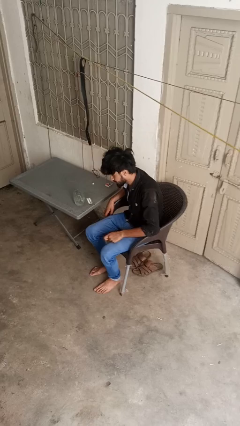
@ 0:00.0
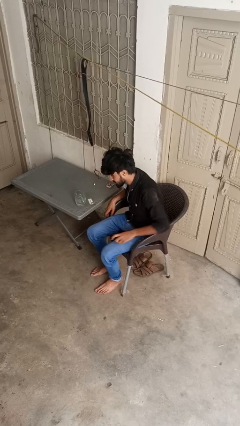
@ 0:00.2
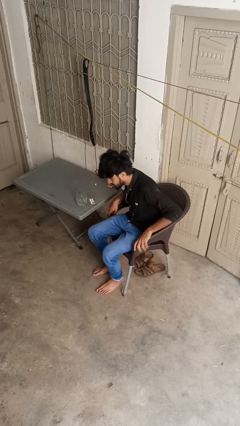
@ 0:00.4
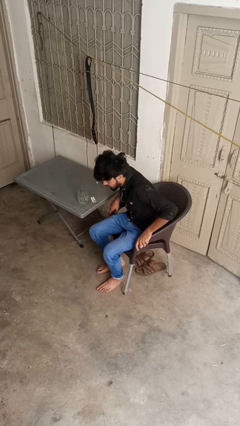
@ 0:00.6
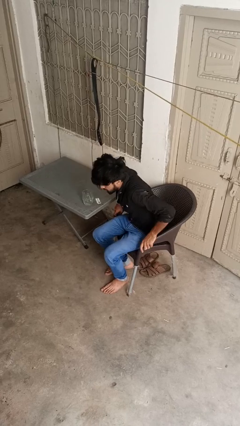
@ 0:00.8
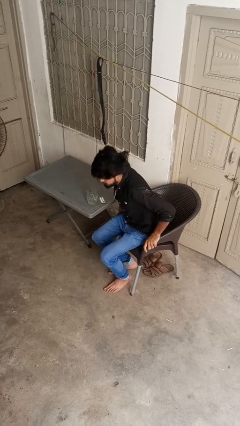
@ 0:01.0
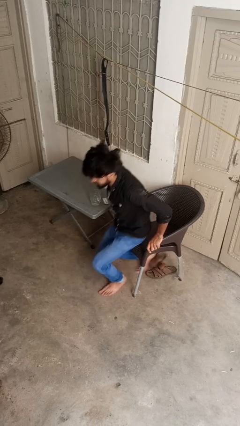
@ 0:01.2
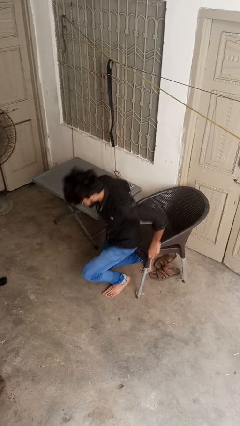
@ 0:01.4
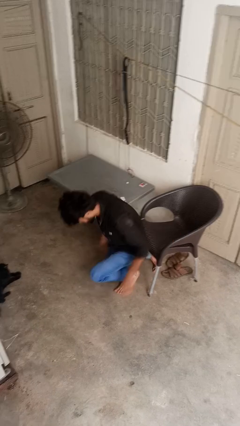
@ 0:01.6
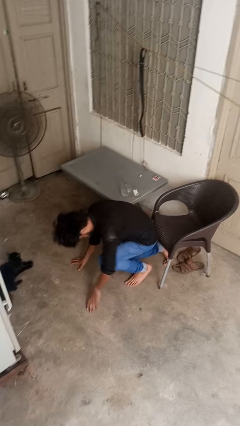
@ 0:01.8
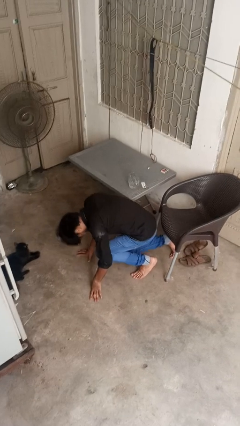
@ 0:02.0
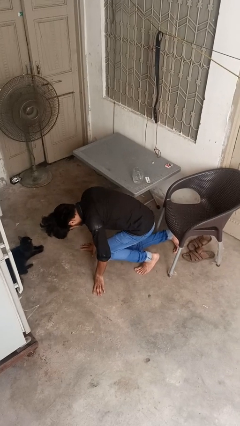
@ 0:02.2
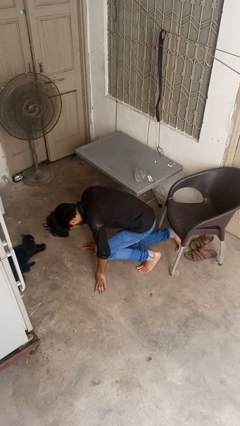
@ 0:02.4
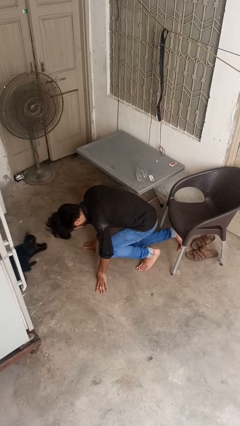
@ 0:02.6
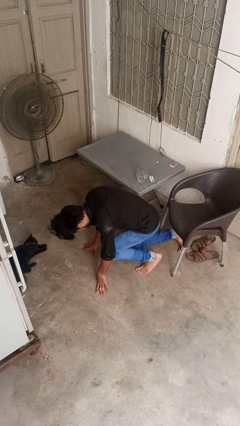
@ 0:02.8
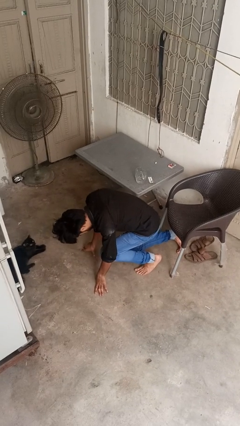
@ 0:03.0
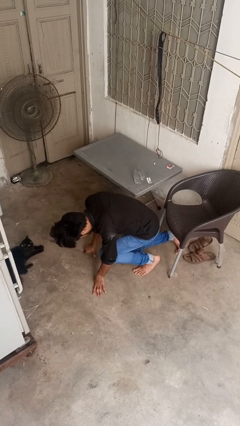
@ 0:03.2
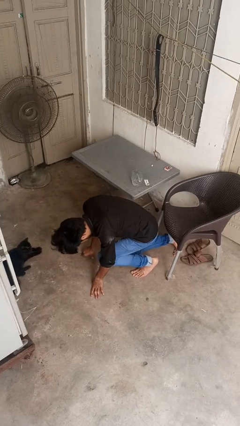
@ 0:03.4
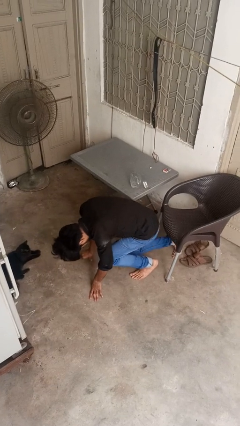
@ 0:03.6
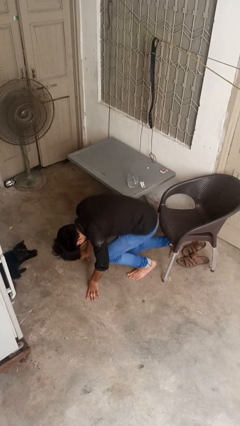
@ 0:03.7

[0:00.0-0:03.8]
person falls from chair

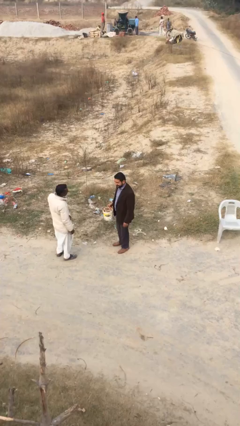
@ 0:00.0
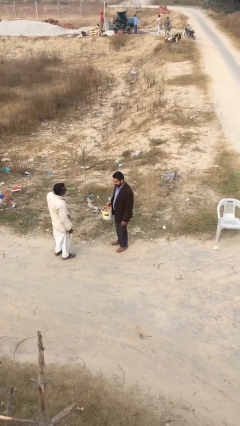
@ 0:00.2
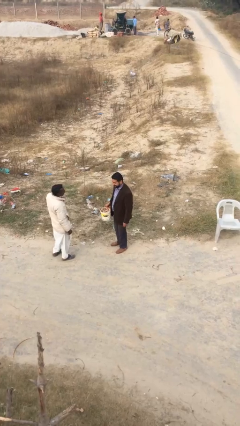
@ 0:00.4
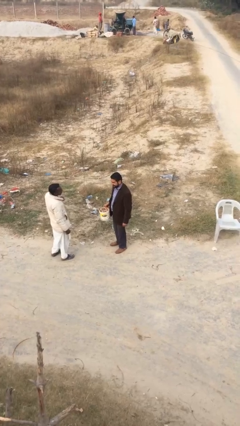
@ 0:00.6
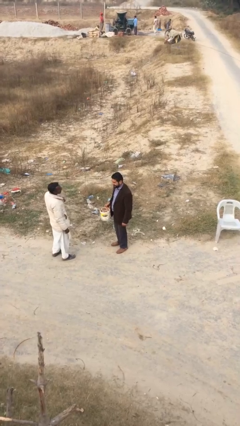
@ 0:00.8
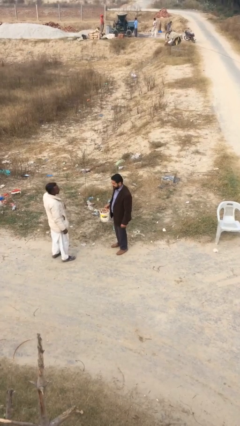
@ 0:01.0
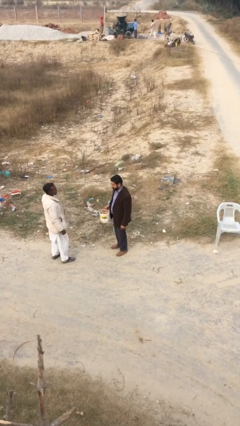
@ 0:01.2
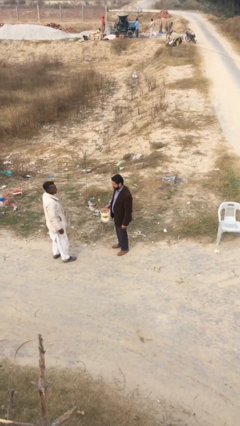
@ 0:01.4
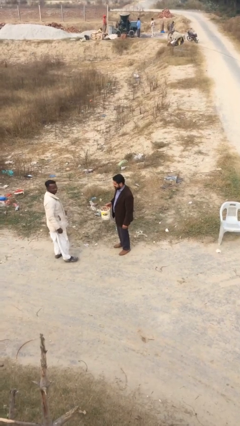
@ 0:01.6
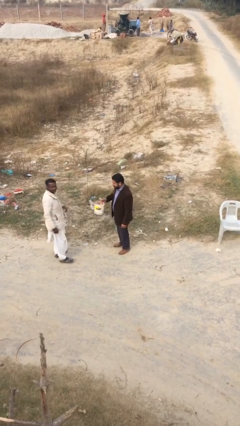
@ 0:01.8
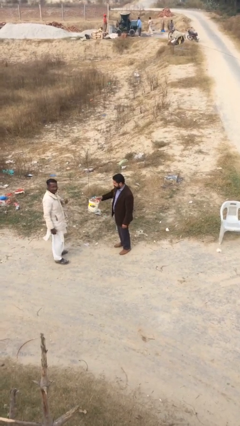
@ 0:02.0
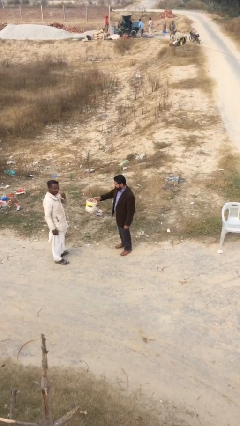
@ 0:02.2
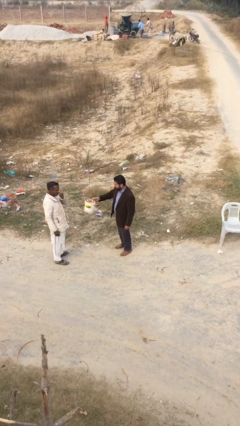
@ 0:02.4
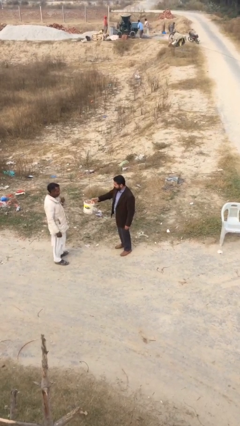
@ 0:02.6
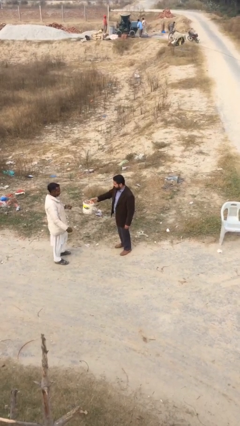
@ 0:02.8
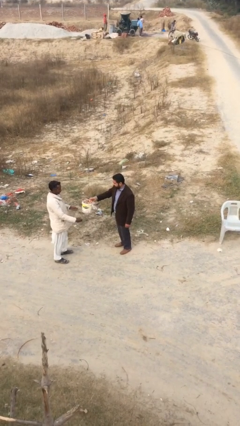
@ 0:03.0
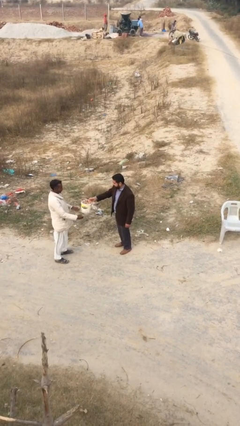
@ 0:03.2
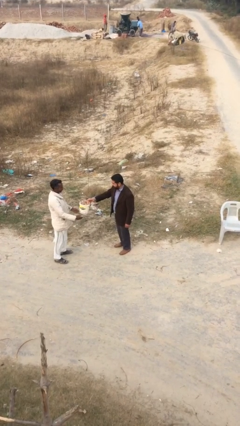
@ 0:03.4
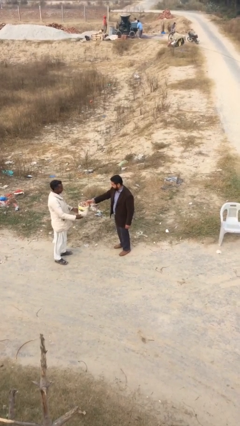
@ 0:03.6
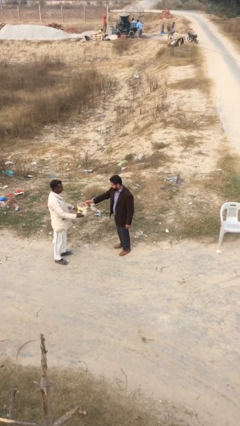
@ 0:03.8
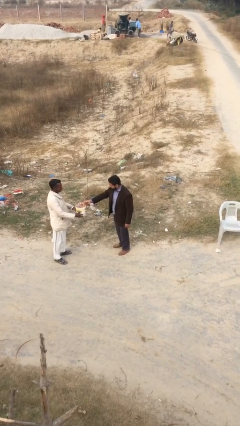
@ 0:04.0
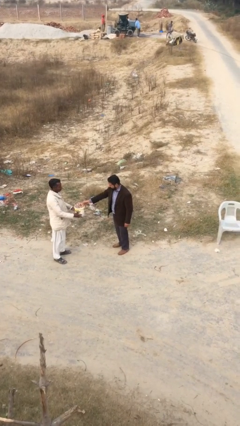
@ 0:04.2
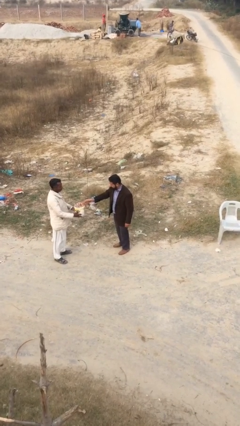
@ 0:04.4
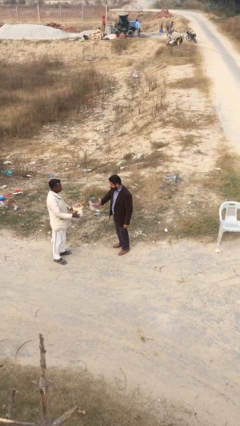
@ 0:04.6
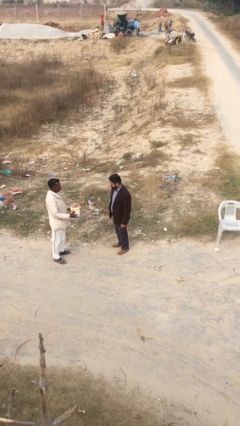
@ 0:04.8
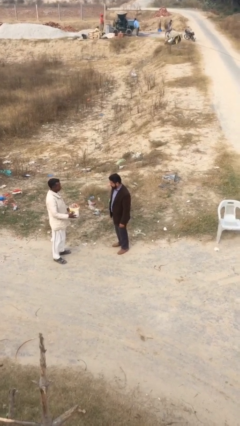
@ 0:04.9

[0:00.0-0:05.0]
person transfers object to person

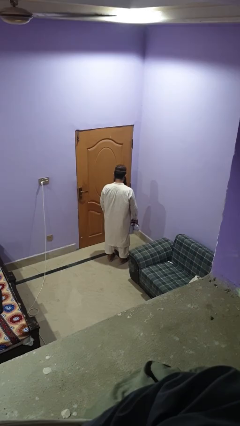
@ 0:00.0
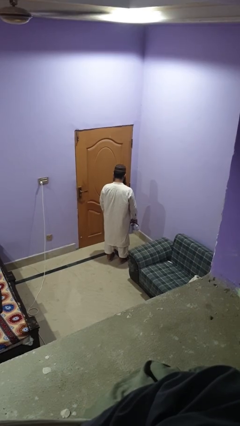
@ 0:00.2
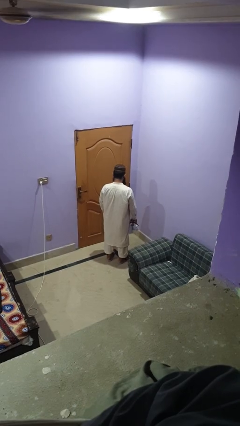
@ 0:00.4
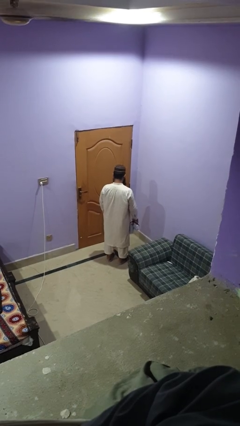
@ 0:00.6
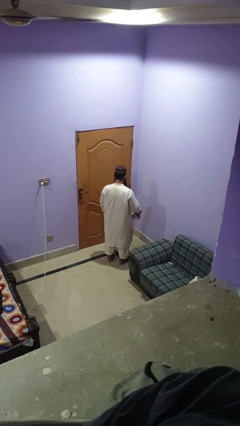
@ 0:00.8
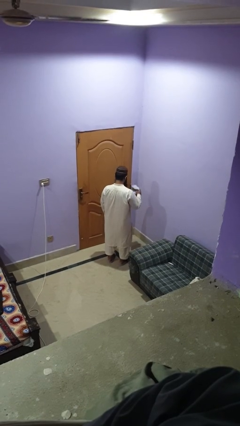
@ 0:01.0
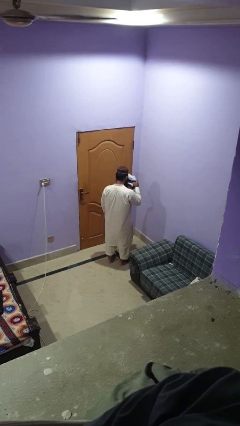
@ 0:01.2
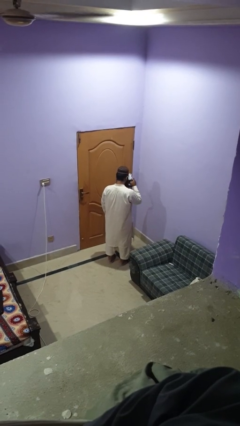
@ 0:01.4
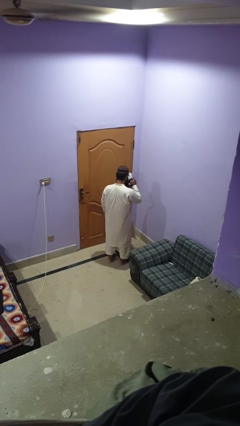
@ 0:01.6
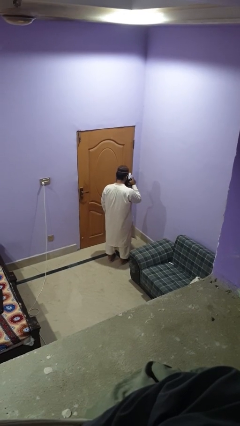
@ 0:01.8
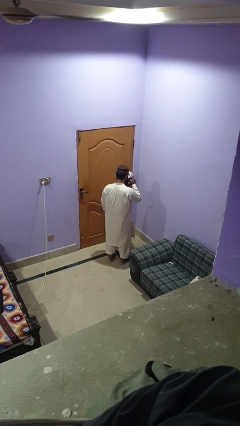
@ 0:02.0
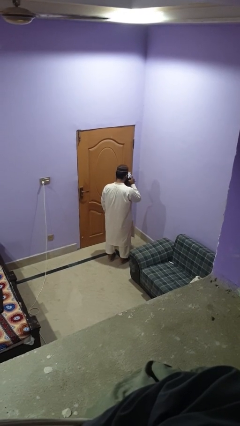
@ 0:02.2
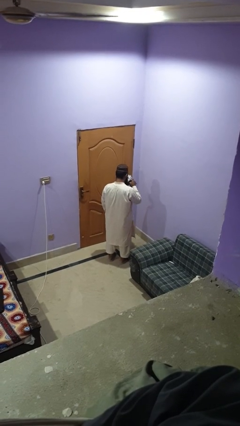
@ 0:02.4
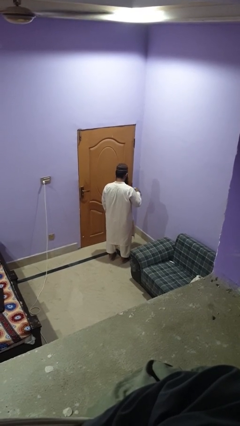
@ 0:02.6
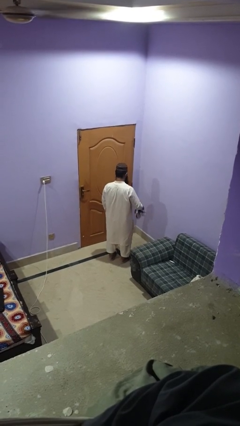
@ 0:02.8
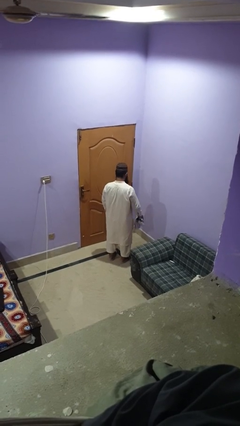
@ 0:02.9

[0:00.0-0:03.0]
person blows nose

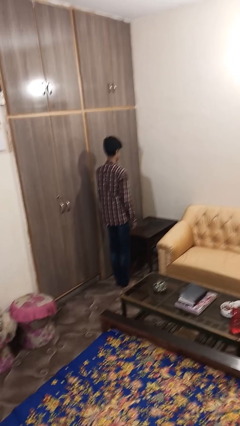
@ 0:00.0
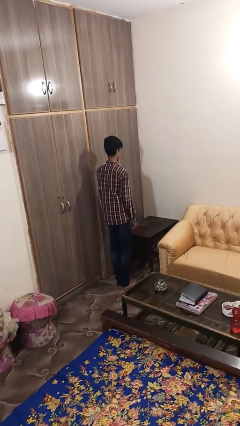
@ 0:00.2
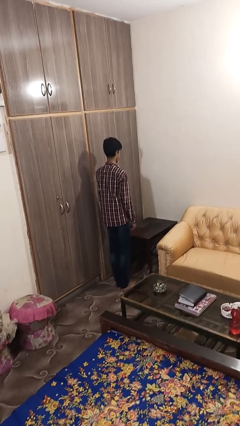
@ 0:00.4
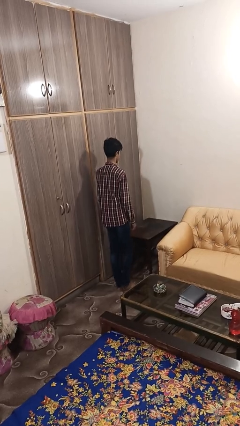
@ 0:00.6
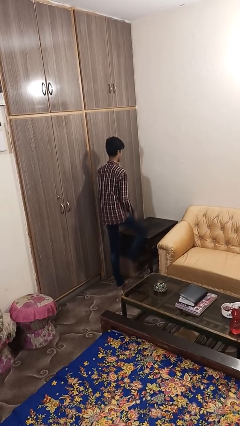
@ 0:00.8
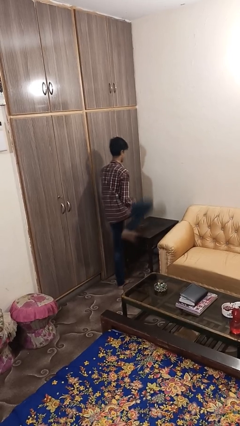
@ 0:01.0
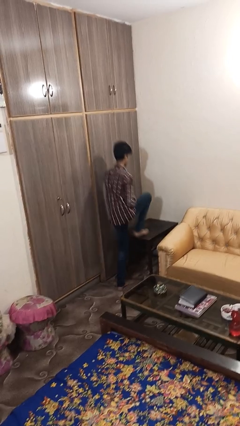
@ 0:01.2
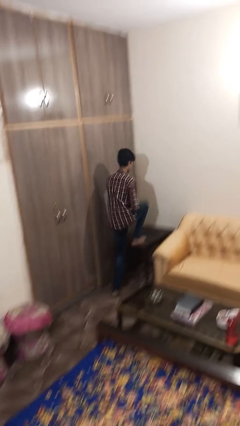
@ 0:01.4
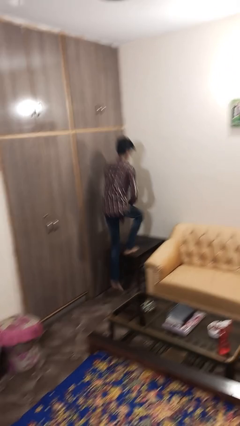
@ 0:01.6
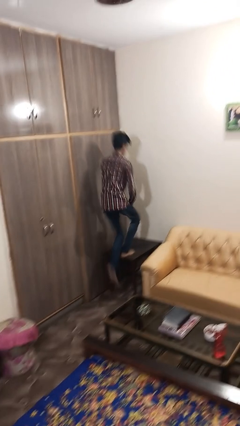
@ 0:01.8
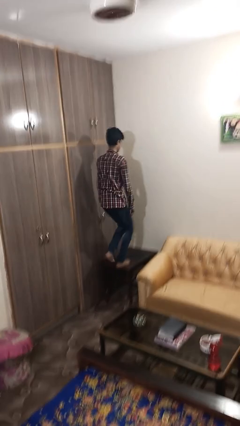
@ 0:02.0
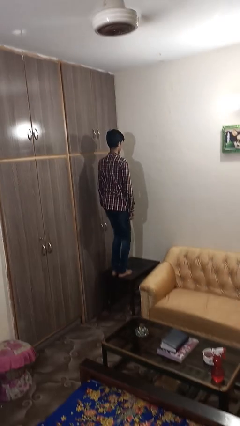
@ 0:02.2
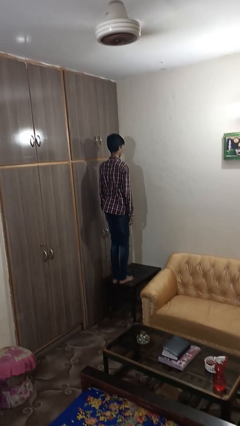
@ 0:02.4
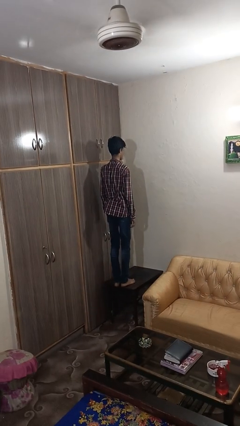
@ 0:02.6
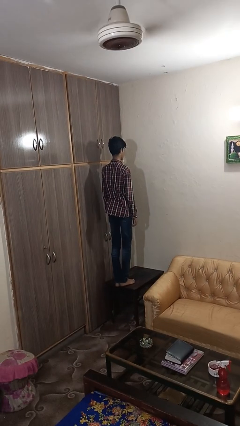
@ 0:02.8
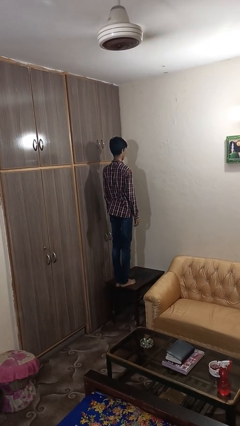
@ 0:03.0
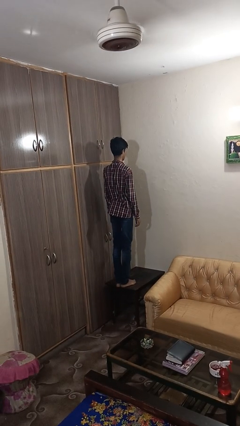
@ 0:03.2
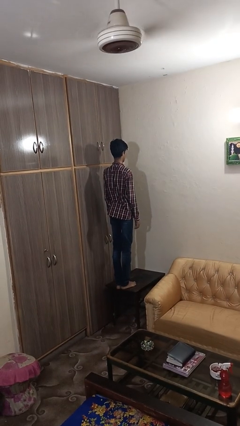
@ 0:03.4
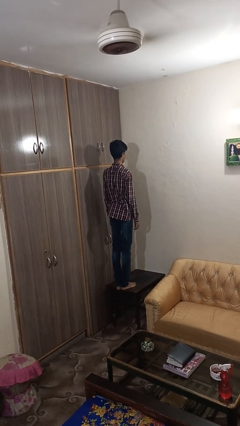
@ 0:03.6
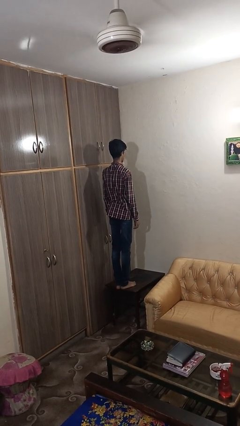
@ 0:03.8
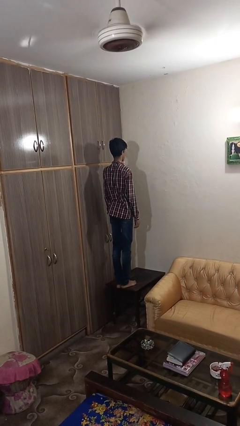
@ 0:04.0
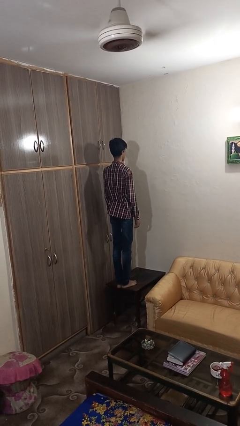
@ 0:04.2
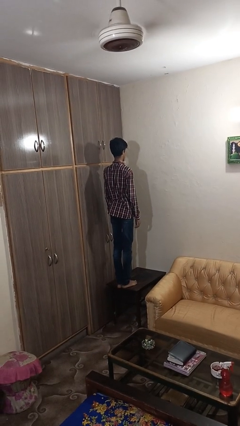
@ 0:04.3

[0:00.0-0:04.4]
person climbs on table

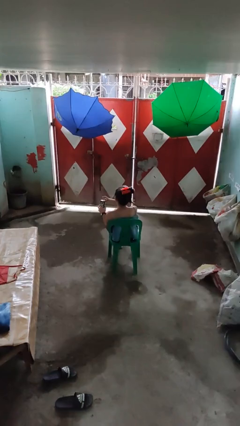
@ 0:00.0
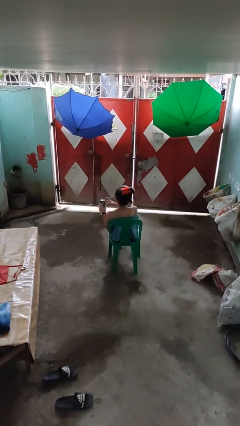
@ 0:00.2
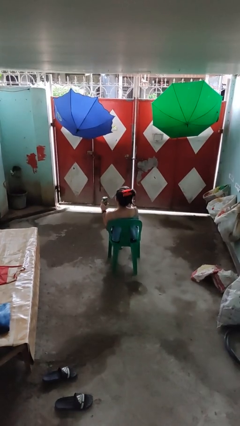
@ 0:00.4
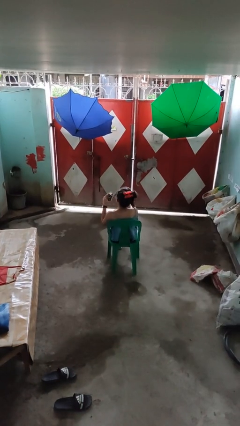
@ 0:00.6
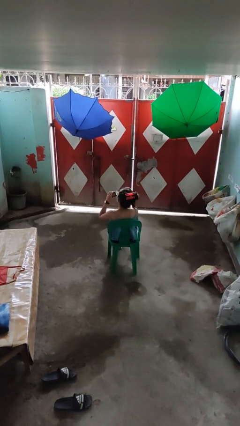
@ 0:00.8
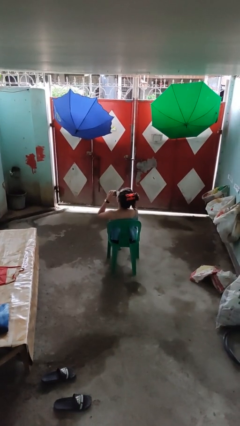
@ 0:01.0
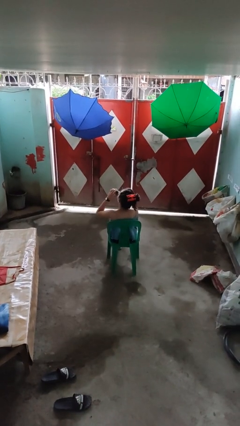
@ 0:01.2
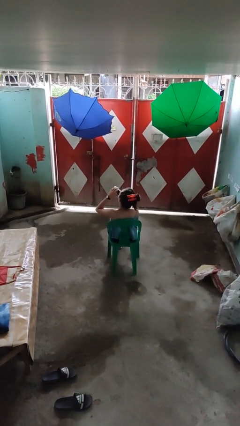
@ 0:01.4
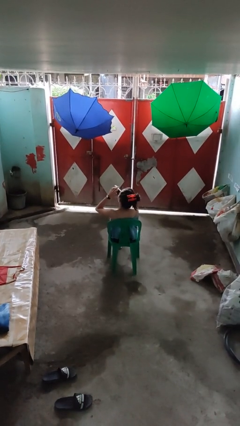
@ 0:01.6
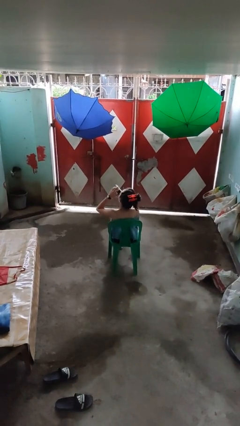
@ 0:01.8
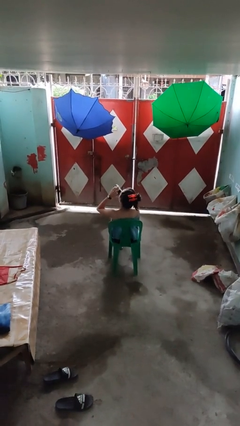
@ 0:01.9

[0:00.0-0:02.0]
person drinks from beverage can
